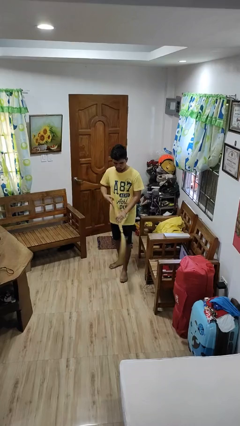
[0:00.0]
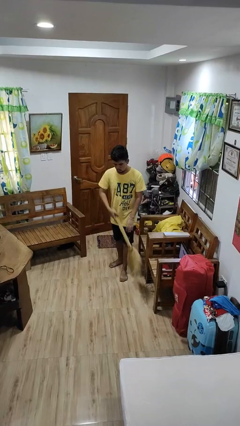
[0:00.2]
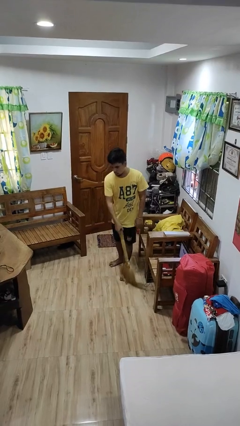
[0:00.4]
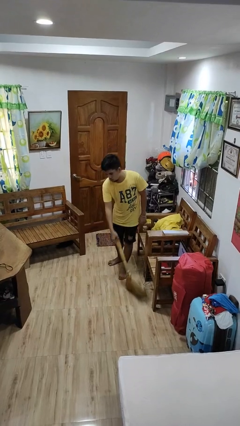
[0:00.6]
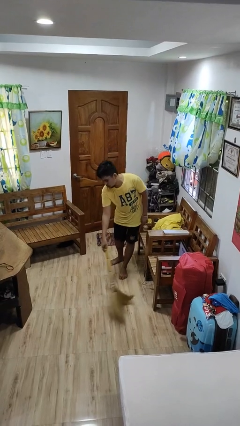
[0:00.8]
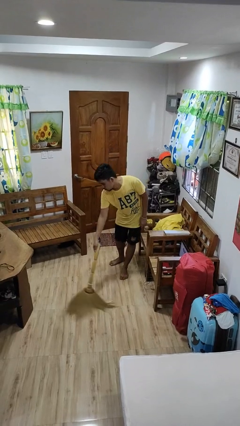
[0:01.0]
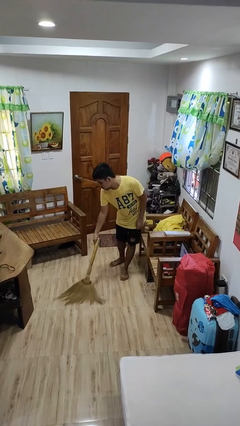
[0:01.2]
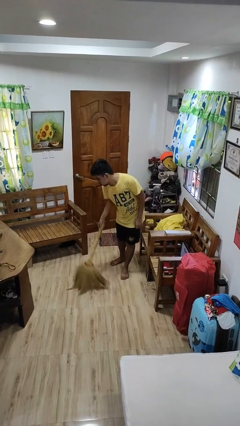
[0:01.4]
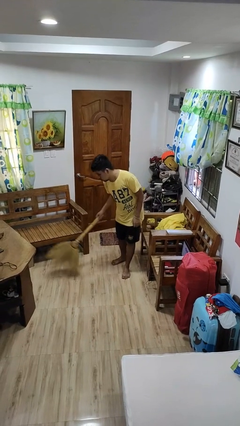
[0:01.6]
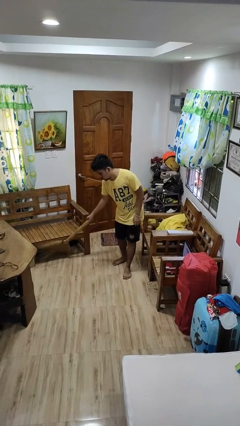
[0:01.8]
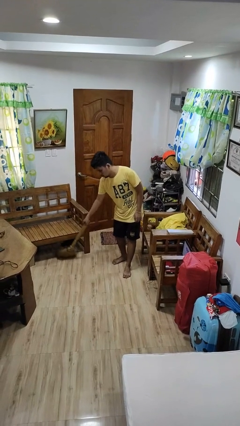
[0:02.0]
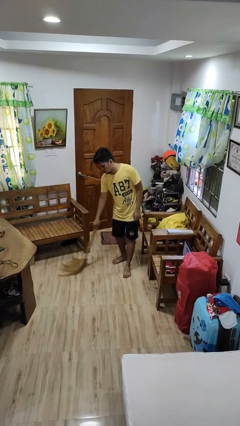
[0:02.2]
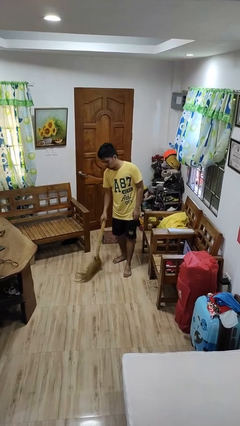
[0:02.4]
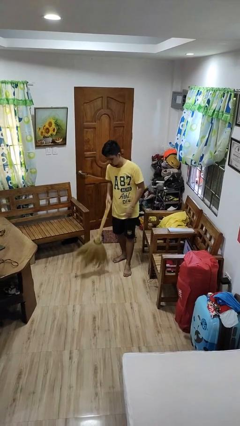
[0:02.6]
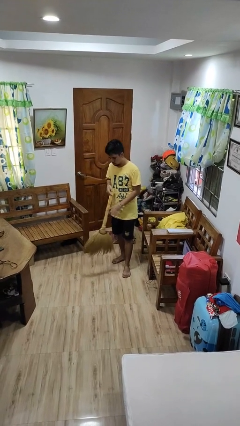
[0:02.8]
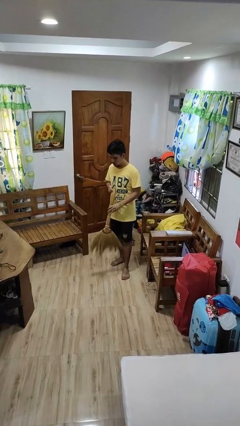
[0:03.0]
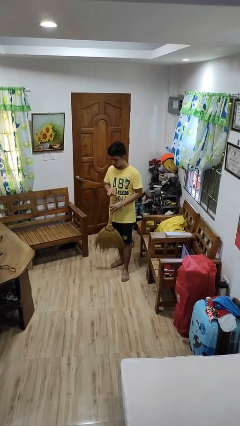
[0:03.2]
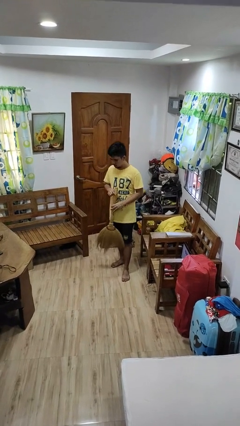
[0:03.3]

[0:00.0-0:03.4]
person sweeps floor

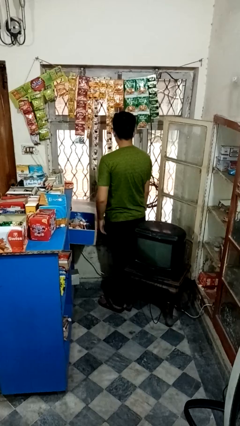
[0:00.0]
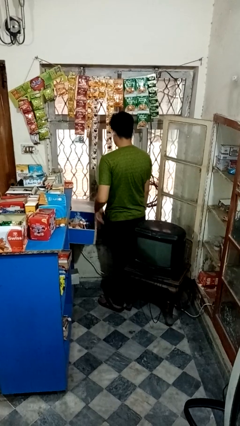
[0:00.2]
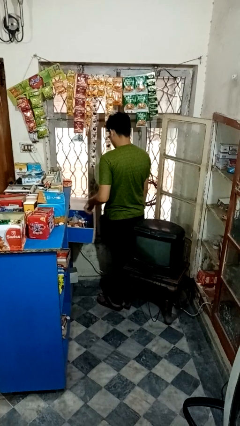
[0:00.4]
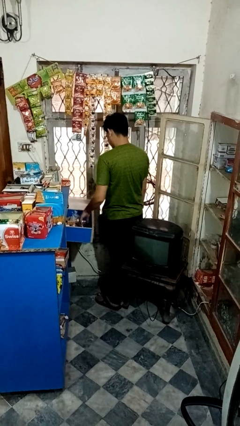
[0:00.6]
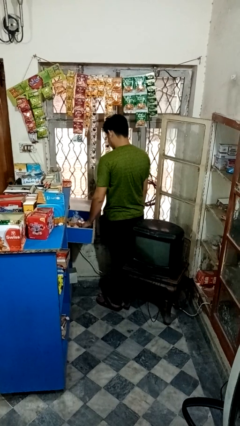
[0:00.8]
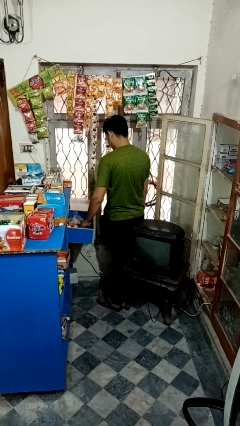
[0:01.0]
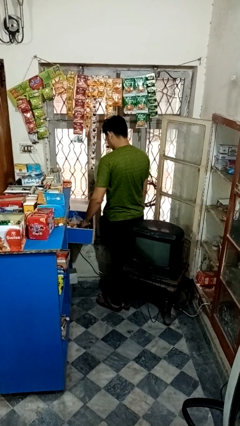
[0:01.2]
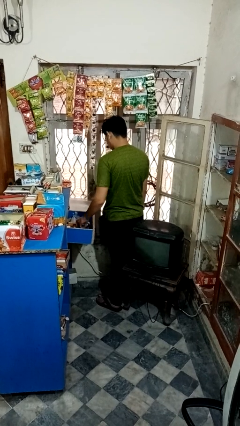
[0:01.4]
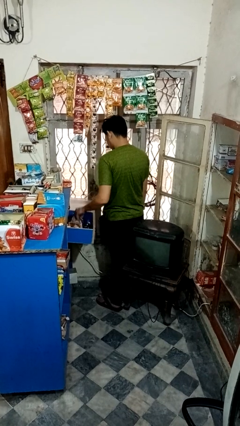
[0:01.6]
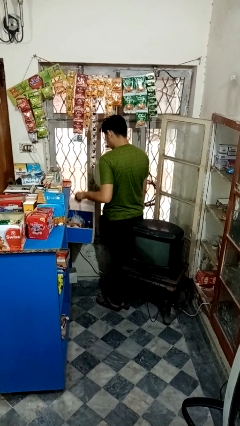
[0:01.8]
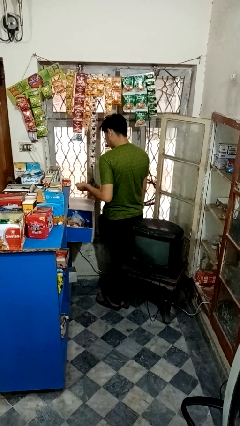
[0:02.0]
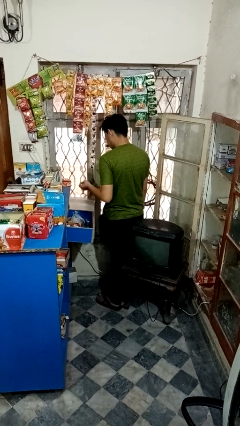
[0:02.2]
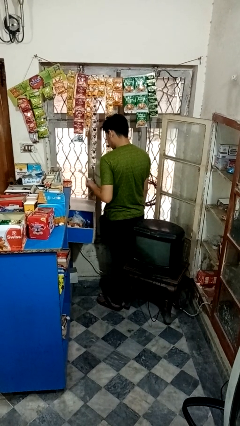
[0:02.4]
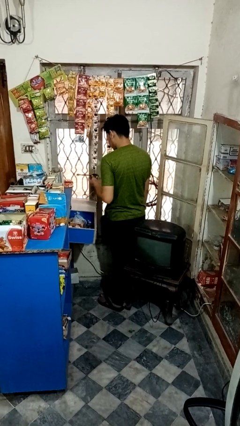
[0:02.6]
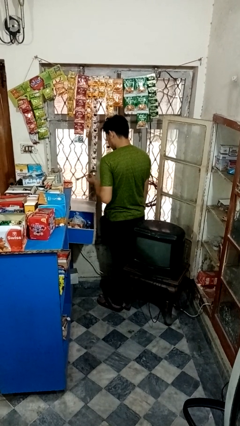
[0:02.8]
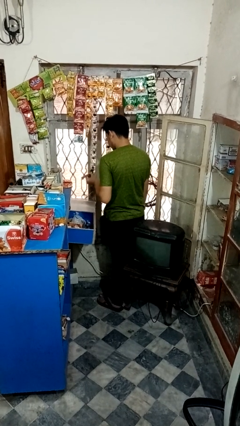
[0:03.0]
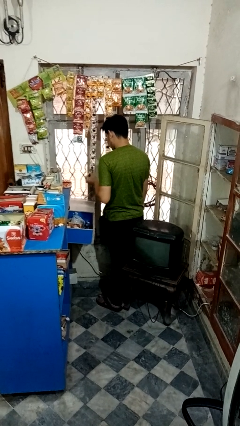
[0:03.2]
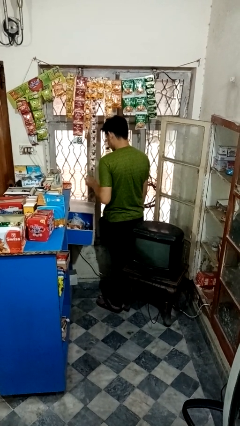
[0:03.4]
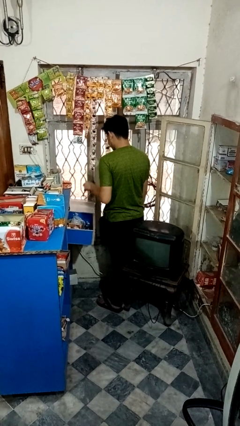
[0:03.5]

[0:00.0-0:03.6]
person searches in kitchen drawer

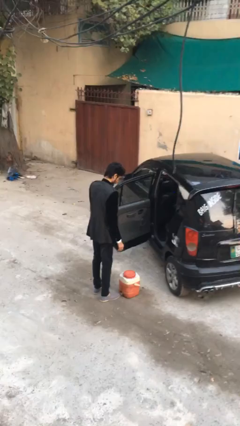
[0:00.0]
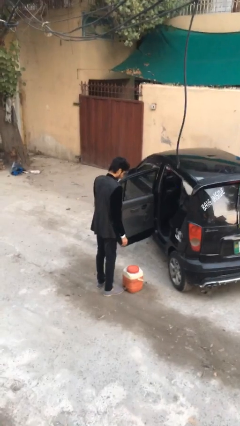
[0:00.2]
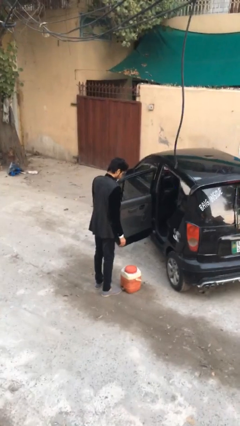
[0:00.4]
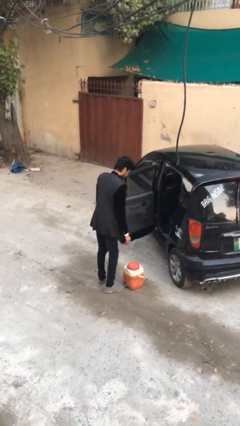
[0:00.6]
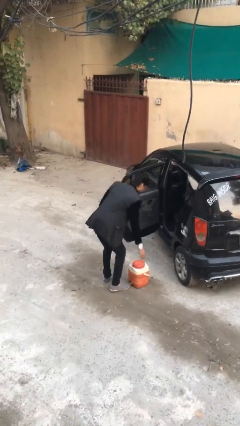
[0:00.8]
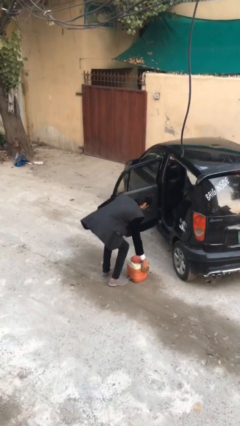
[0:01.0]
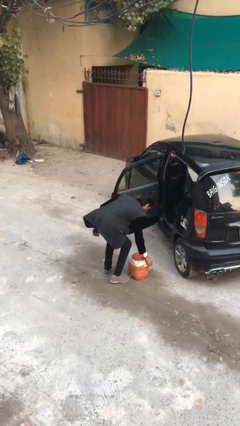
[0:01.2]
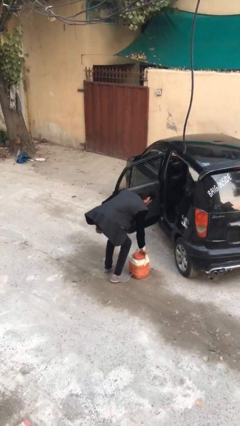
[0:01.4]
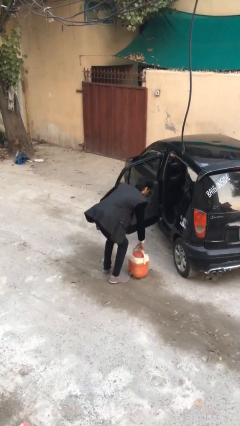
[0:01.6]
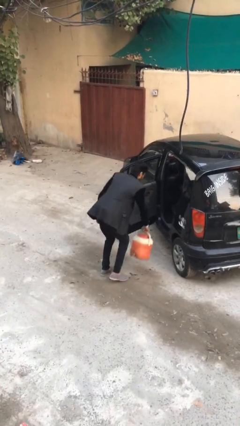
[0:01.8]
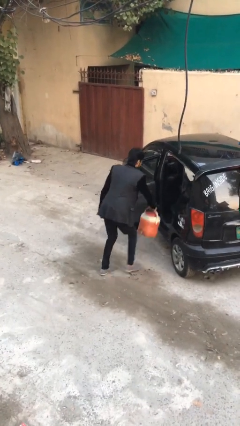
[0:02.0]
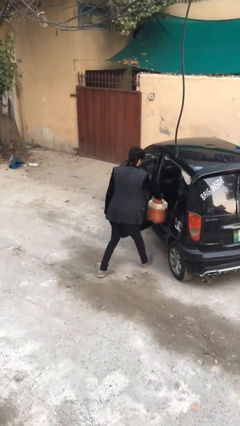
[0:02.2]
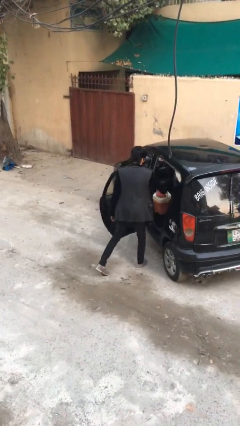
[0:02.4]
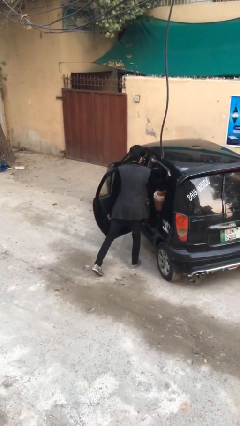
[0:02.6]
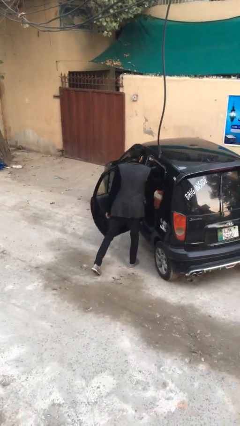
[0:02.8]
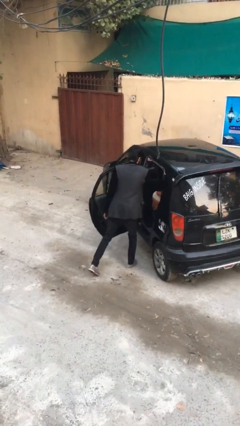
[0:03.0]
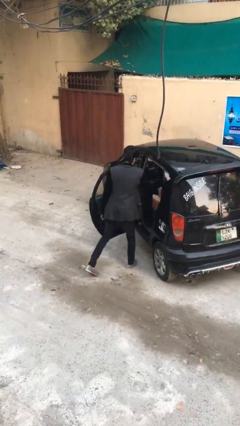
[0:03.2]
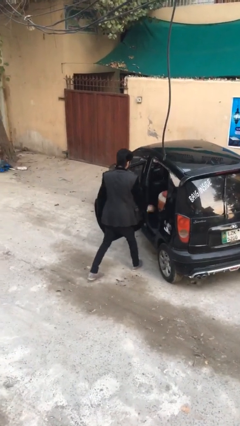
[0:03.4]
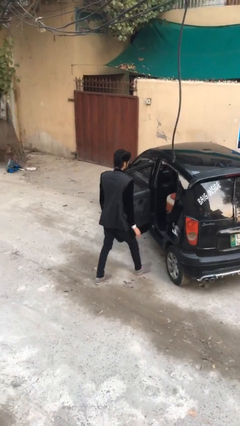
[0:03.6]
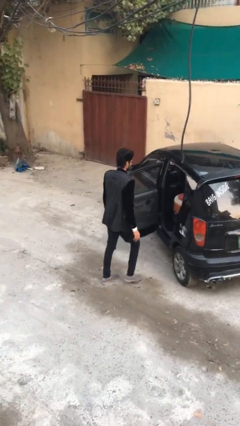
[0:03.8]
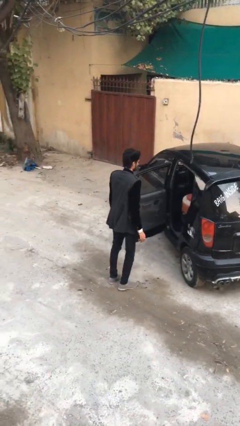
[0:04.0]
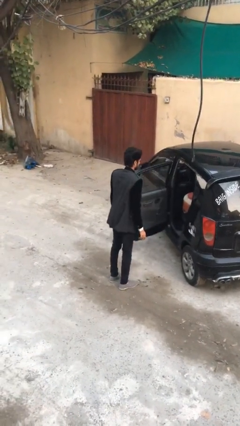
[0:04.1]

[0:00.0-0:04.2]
person loads car

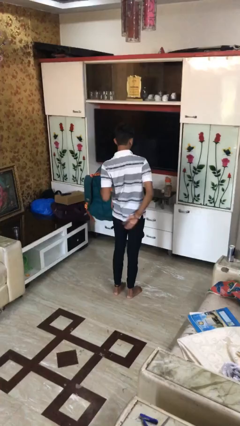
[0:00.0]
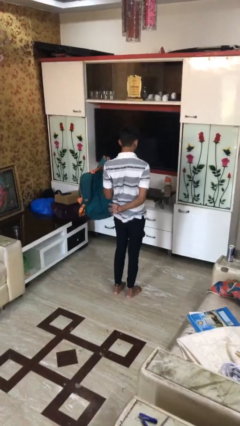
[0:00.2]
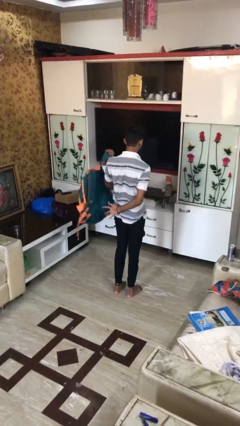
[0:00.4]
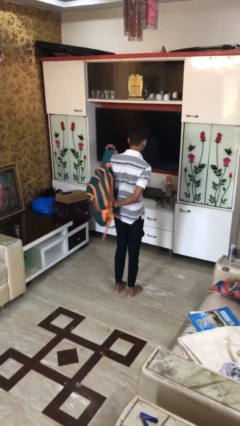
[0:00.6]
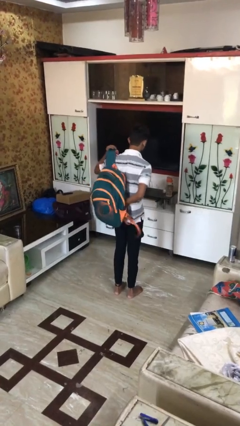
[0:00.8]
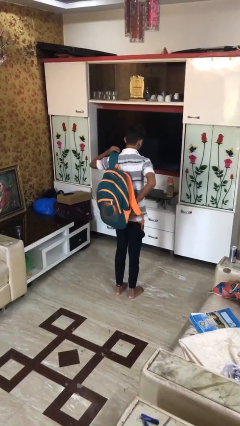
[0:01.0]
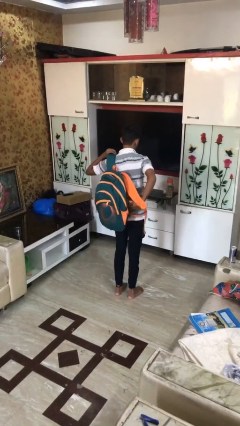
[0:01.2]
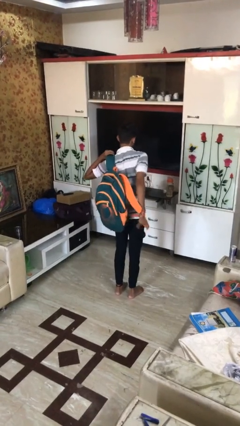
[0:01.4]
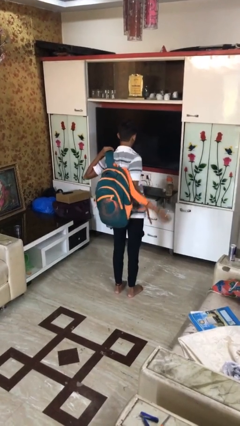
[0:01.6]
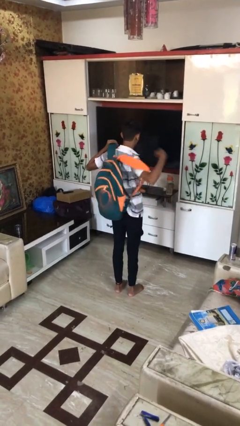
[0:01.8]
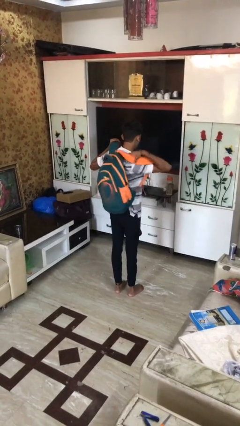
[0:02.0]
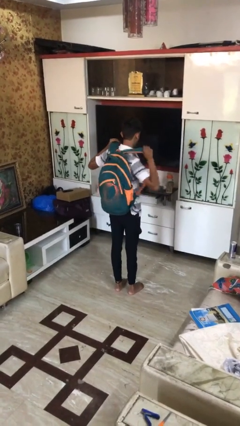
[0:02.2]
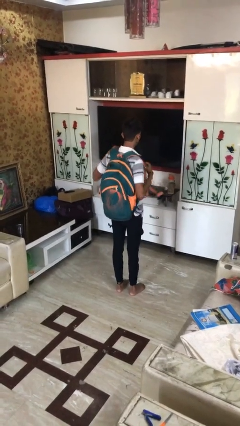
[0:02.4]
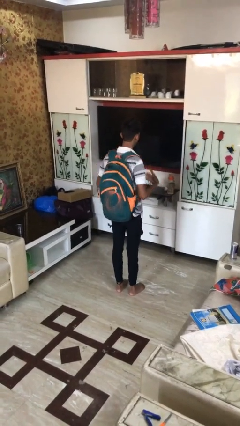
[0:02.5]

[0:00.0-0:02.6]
person puts on backpack

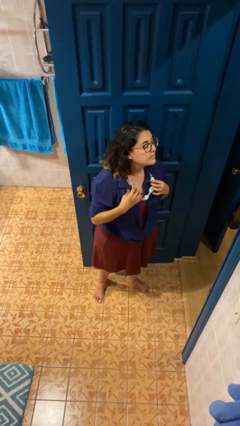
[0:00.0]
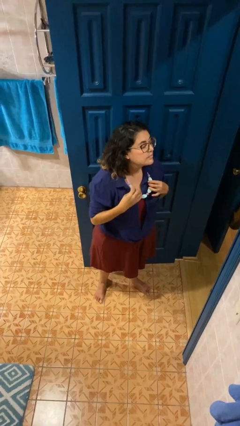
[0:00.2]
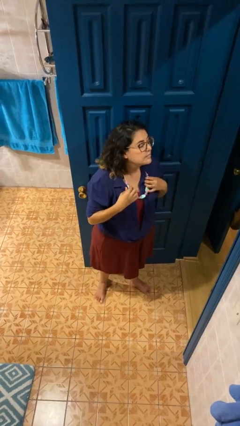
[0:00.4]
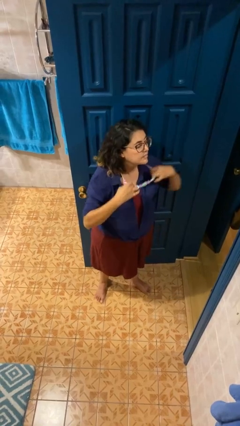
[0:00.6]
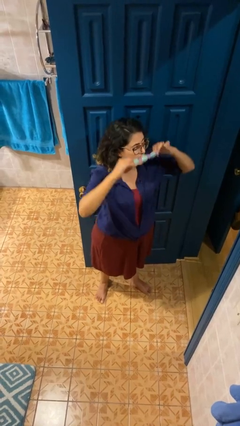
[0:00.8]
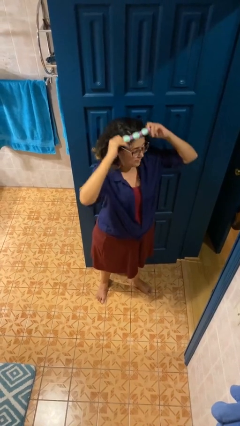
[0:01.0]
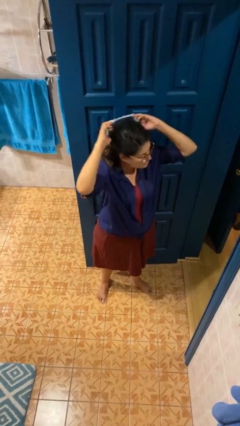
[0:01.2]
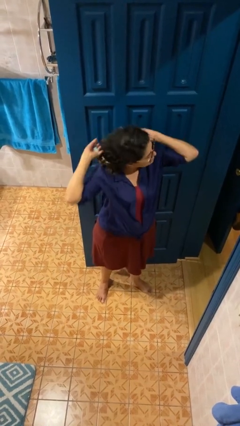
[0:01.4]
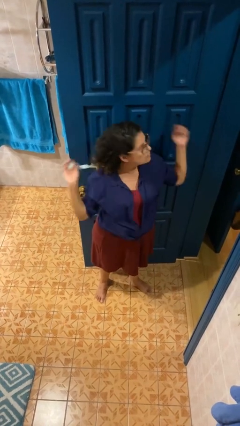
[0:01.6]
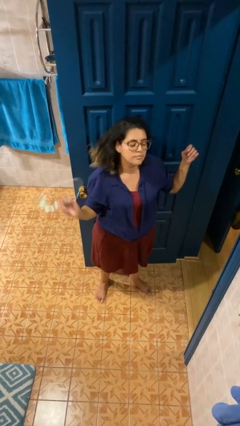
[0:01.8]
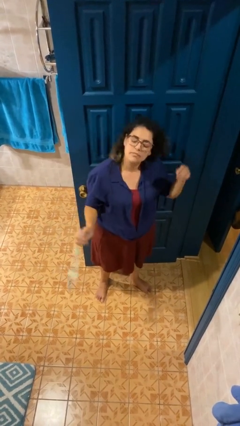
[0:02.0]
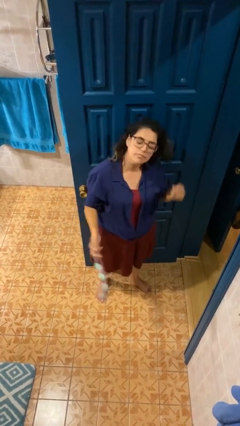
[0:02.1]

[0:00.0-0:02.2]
person takes off necklace

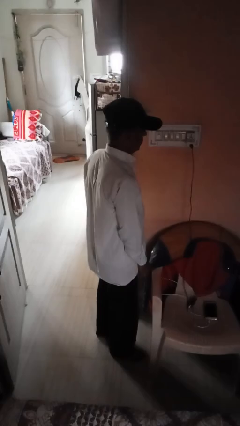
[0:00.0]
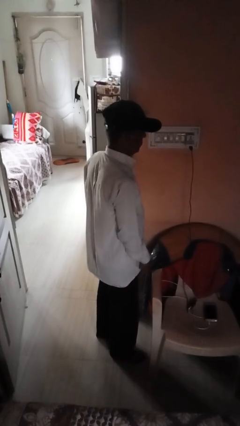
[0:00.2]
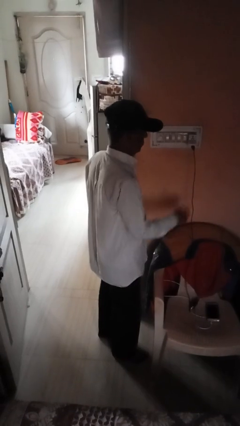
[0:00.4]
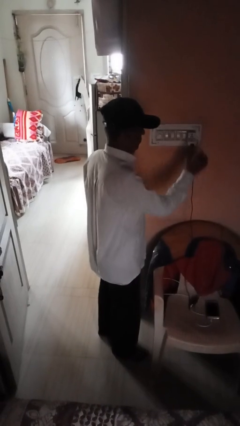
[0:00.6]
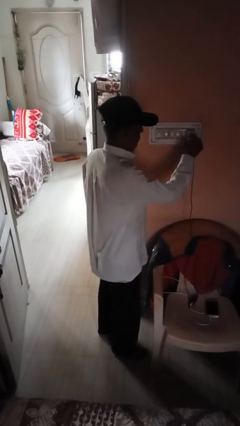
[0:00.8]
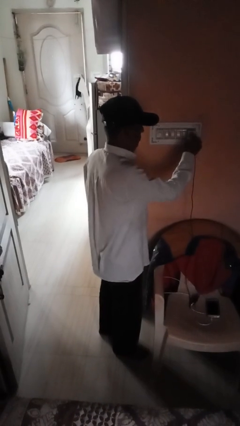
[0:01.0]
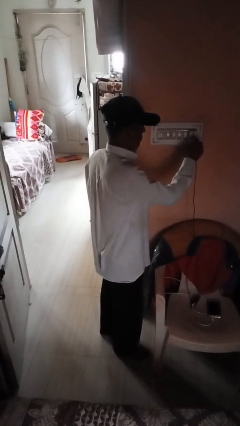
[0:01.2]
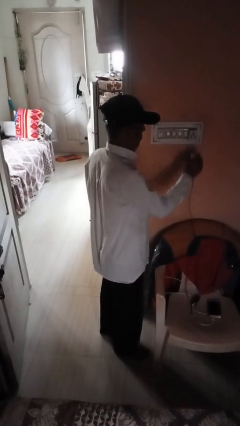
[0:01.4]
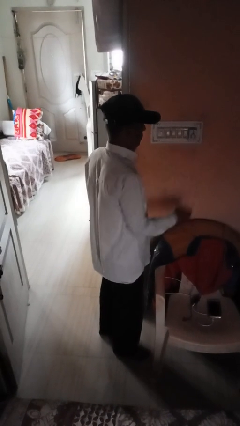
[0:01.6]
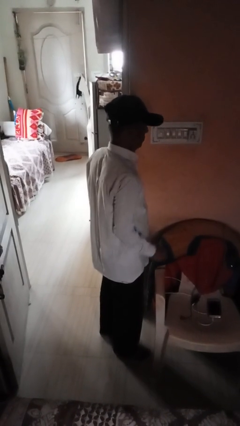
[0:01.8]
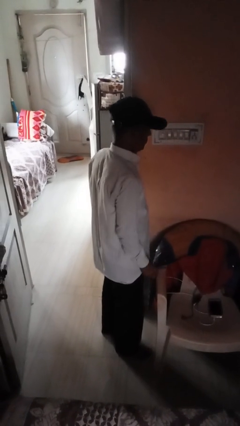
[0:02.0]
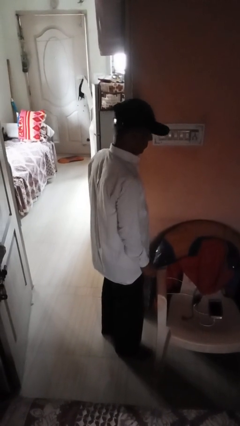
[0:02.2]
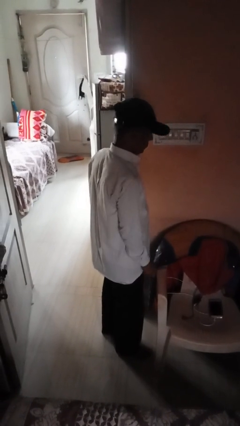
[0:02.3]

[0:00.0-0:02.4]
person unplugs from electrical socket
